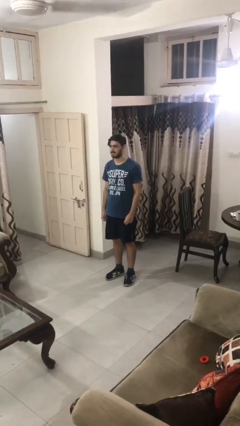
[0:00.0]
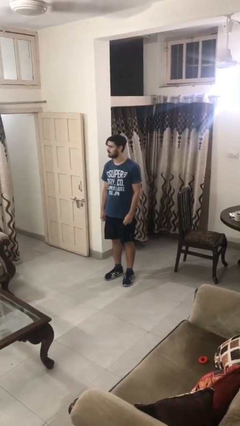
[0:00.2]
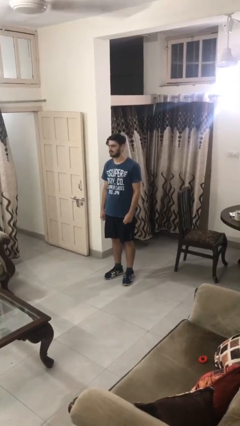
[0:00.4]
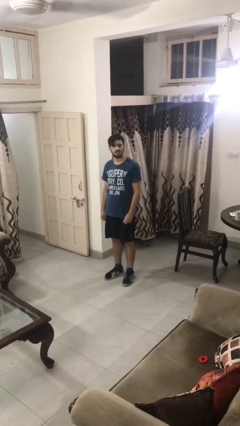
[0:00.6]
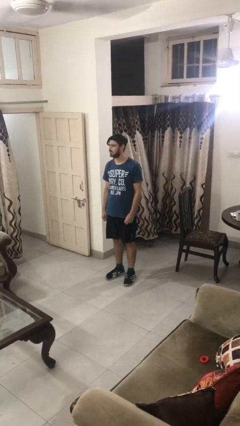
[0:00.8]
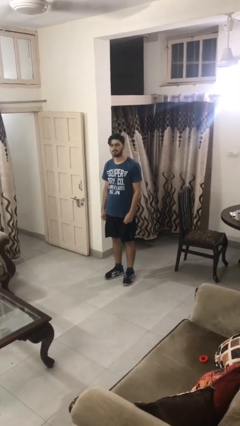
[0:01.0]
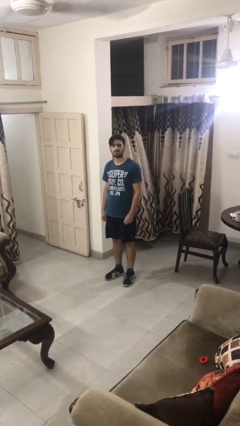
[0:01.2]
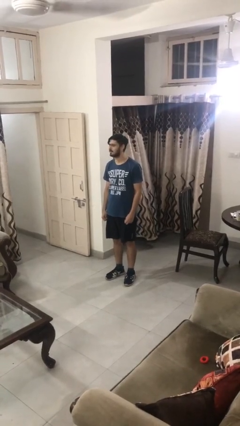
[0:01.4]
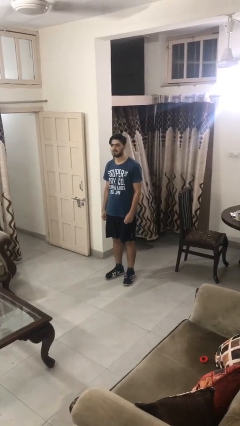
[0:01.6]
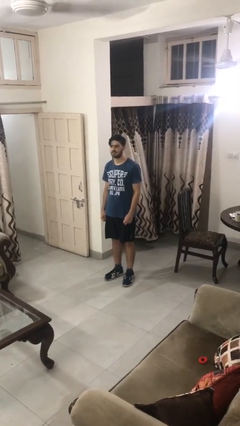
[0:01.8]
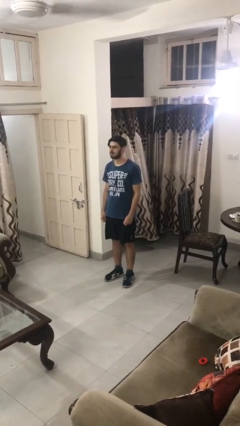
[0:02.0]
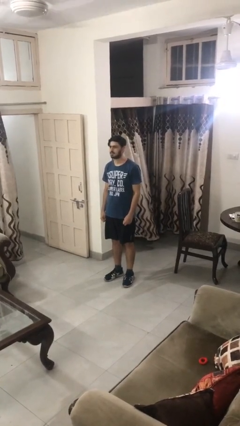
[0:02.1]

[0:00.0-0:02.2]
person shakes head

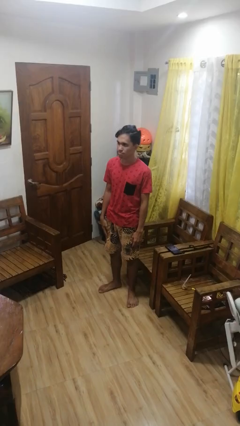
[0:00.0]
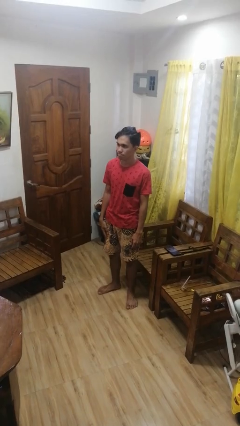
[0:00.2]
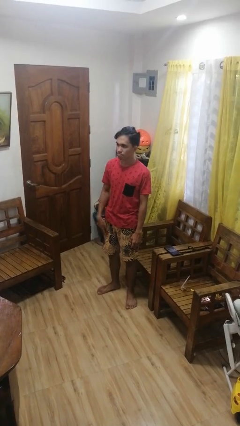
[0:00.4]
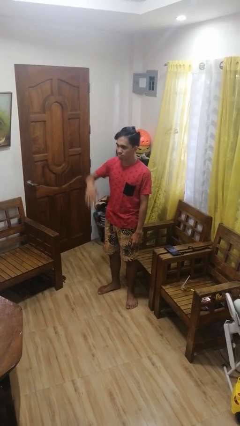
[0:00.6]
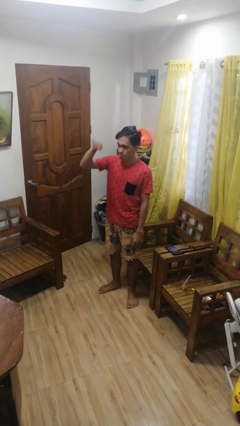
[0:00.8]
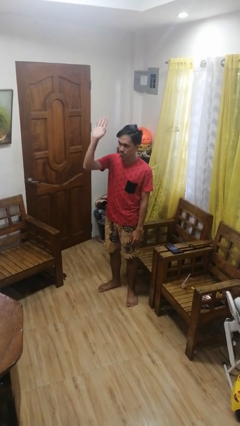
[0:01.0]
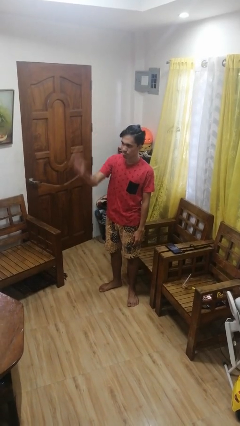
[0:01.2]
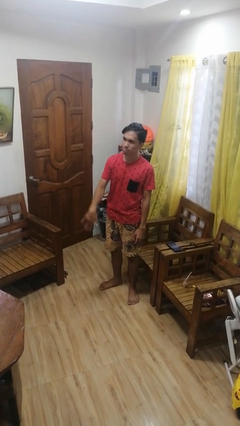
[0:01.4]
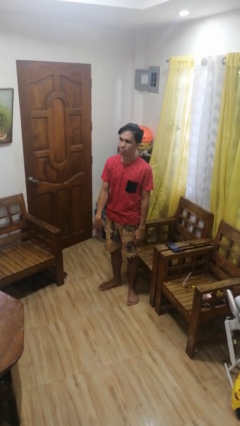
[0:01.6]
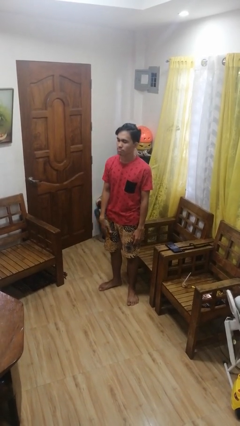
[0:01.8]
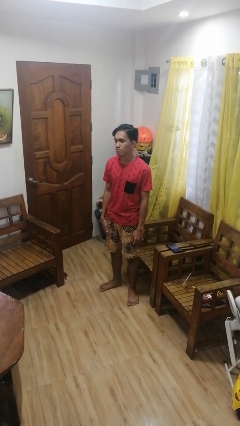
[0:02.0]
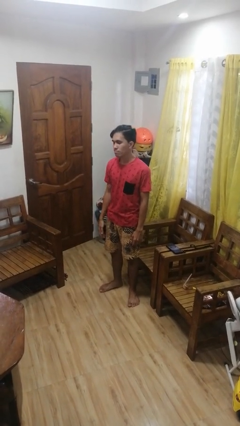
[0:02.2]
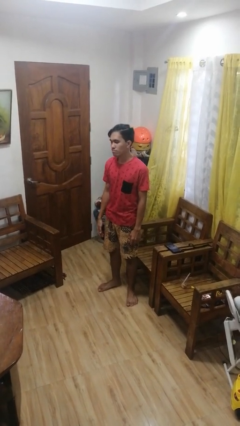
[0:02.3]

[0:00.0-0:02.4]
person gestures swipe down

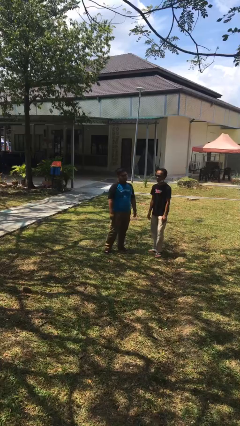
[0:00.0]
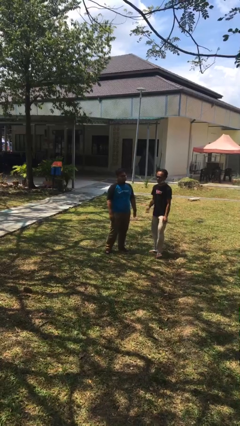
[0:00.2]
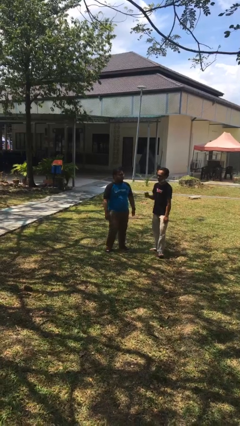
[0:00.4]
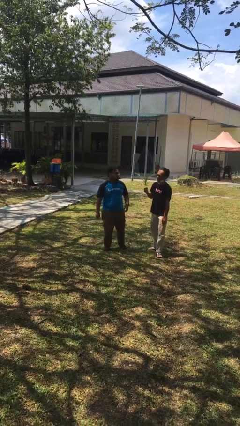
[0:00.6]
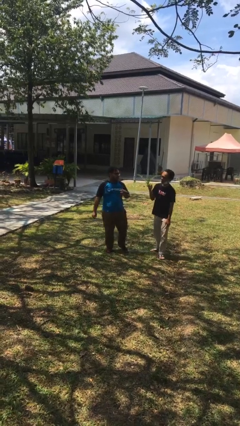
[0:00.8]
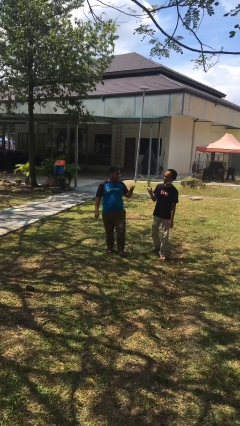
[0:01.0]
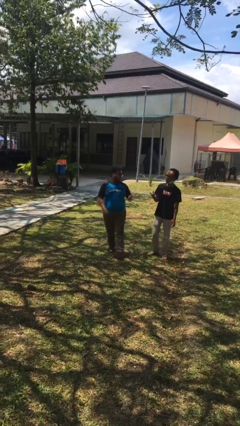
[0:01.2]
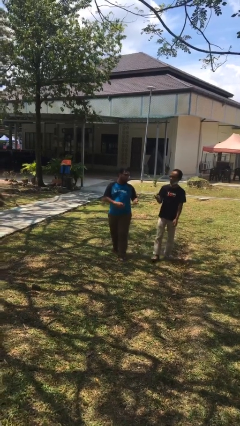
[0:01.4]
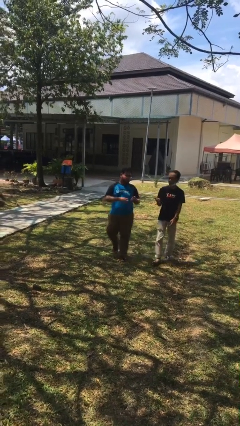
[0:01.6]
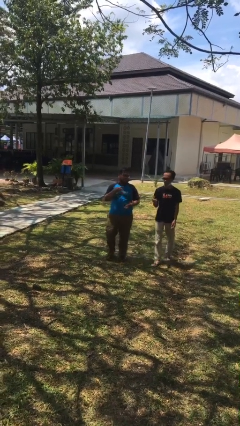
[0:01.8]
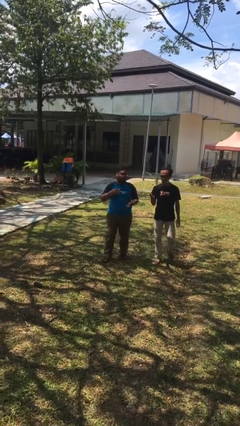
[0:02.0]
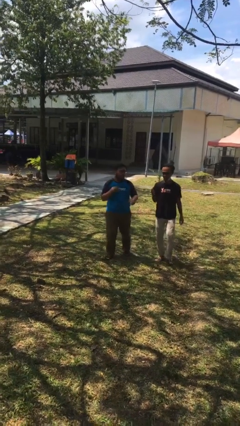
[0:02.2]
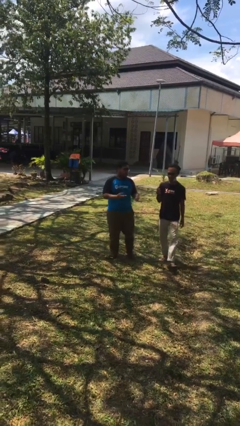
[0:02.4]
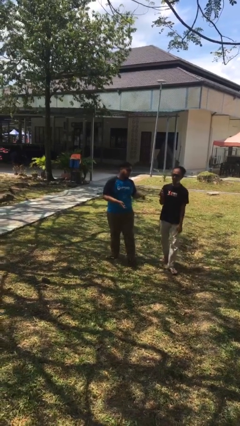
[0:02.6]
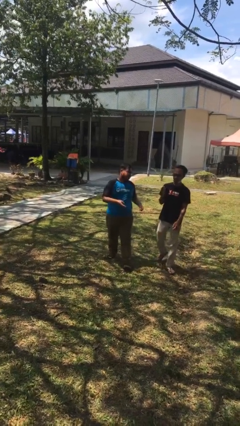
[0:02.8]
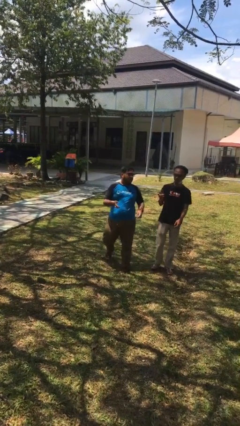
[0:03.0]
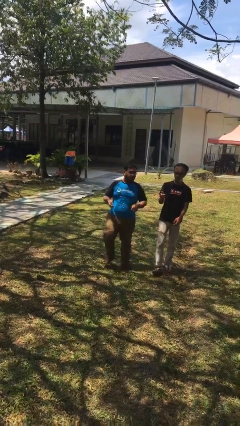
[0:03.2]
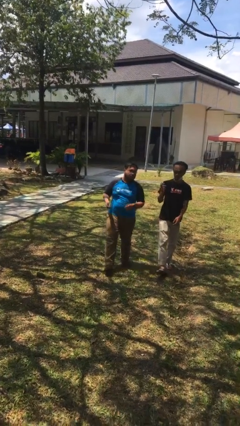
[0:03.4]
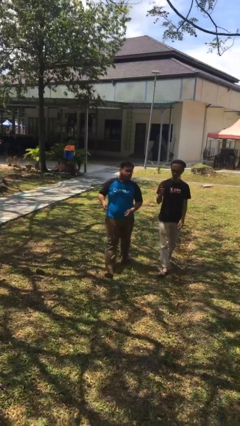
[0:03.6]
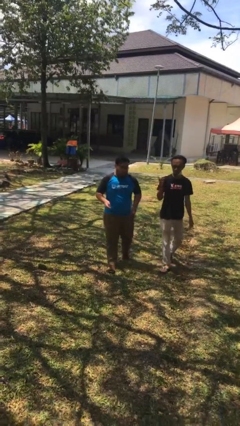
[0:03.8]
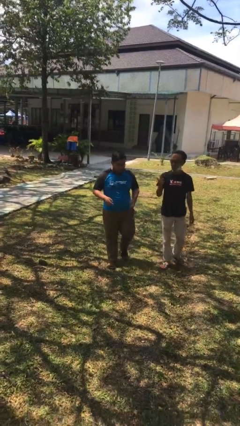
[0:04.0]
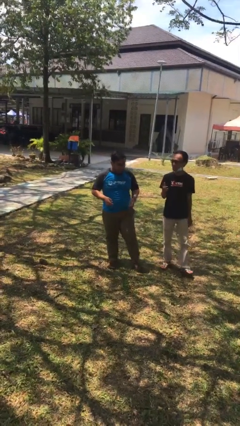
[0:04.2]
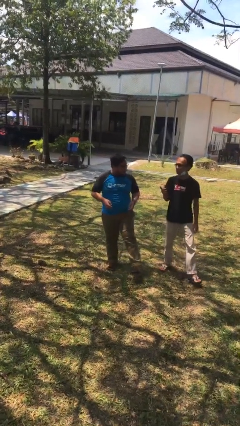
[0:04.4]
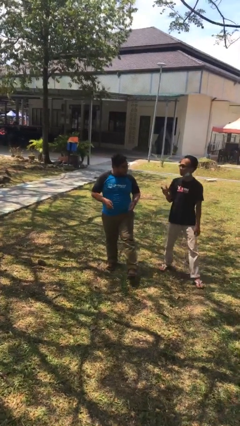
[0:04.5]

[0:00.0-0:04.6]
person talks to person

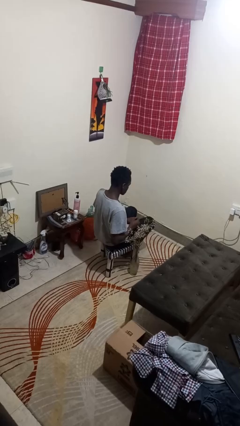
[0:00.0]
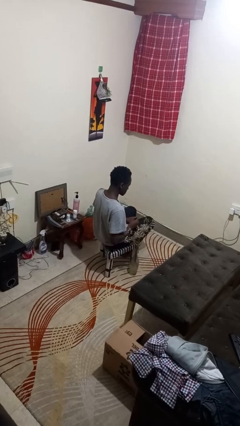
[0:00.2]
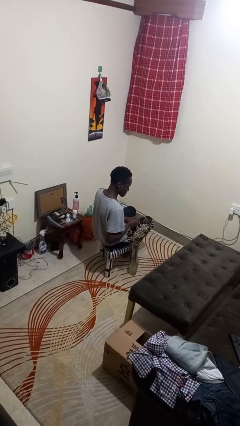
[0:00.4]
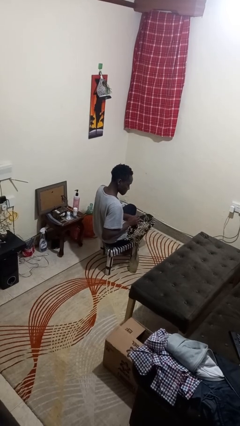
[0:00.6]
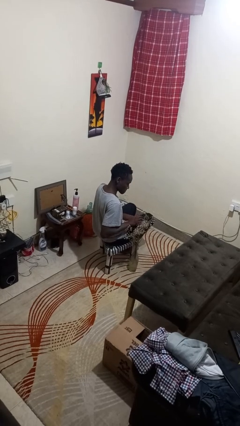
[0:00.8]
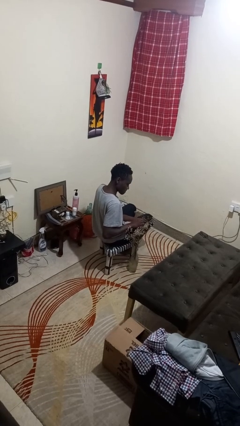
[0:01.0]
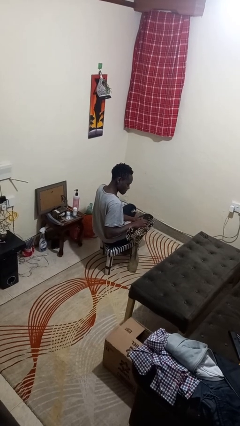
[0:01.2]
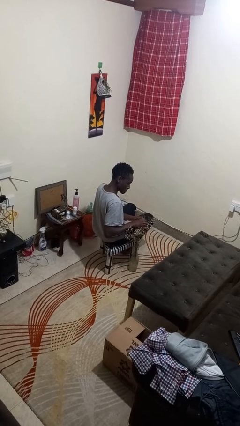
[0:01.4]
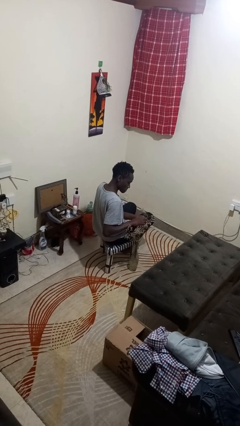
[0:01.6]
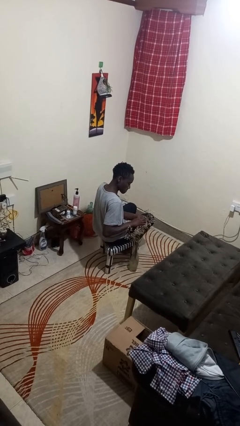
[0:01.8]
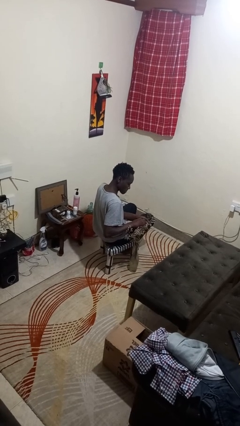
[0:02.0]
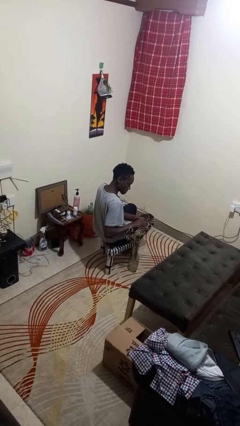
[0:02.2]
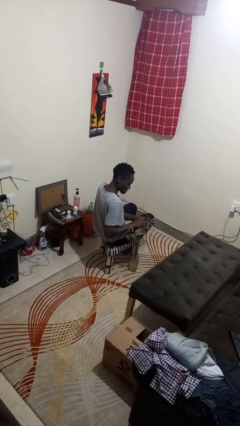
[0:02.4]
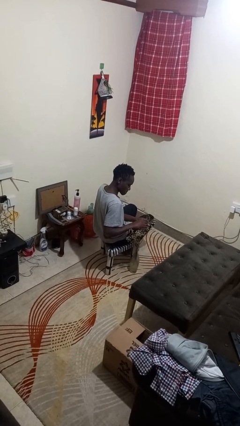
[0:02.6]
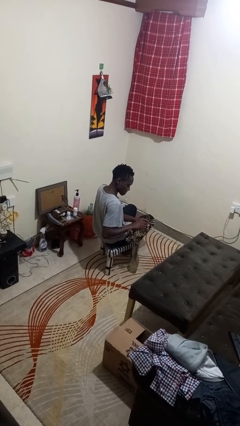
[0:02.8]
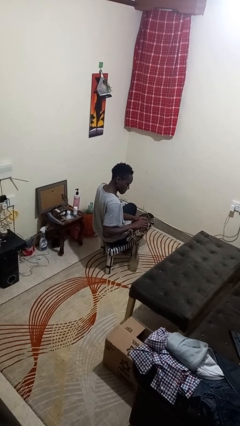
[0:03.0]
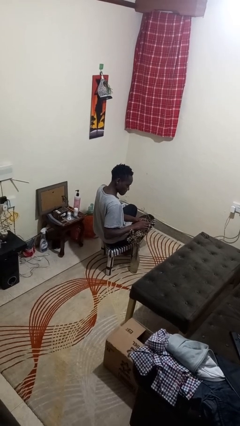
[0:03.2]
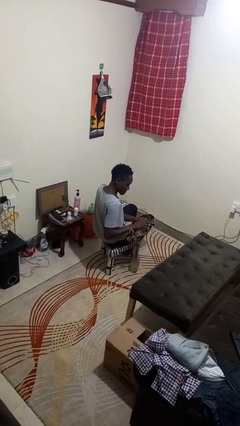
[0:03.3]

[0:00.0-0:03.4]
person arranges flowers in vase

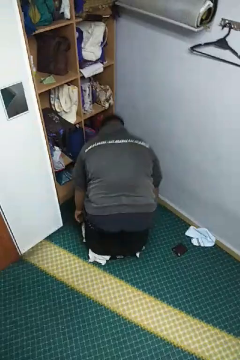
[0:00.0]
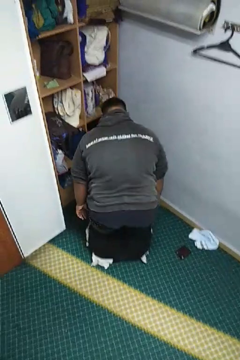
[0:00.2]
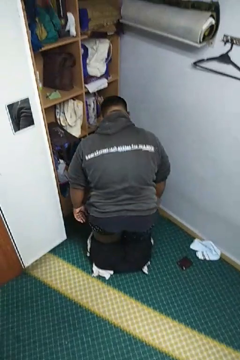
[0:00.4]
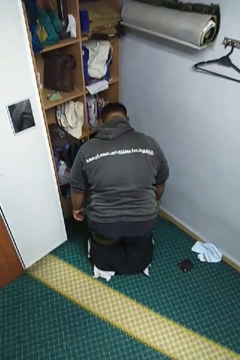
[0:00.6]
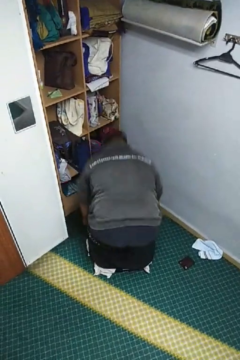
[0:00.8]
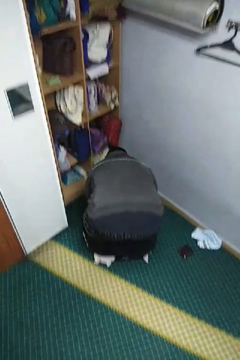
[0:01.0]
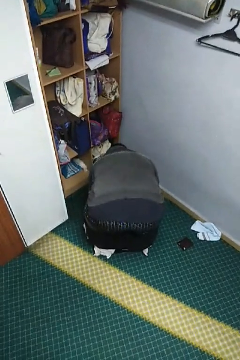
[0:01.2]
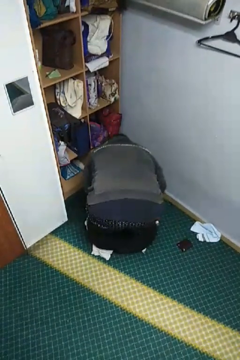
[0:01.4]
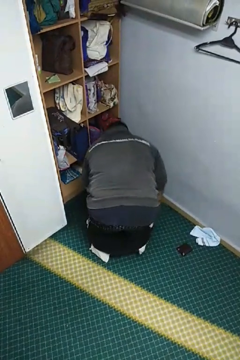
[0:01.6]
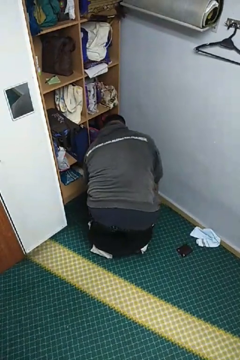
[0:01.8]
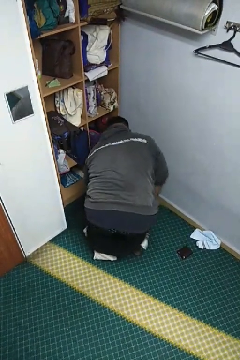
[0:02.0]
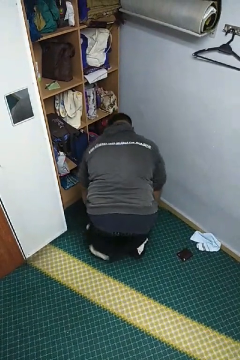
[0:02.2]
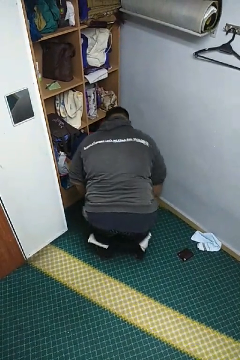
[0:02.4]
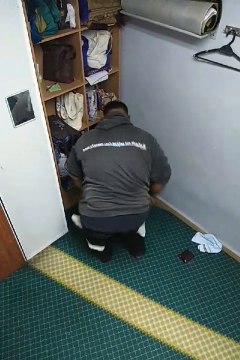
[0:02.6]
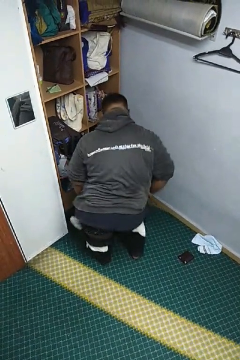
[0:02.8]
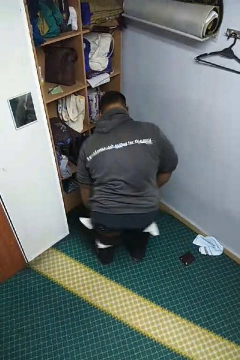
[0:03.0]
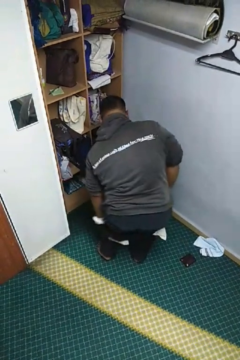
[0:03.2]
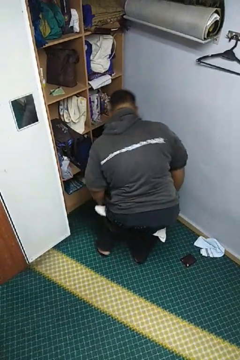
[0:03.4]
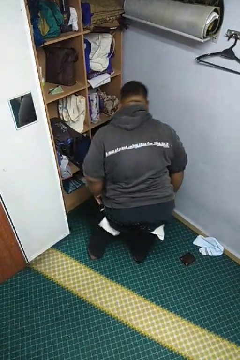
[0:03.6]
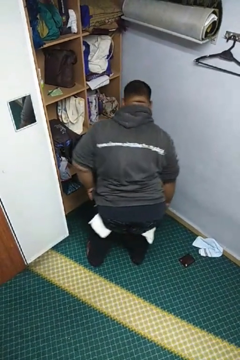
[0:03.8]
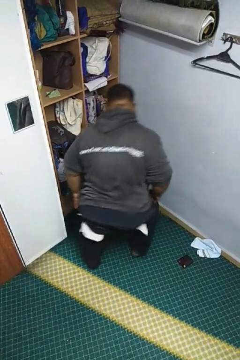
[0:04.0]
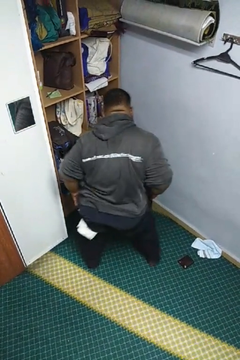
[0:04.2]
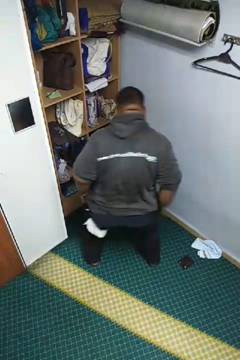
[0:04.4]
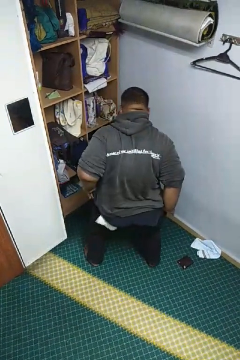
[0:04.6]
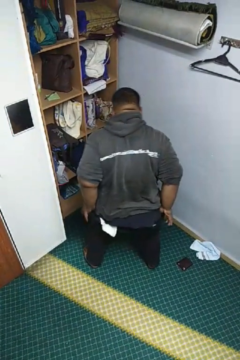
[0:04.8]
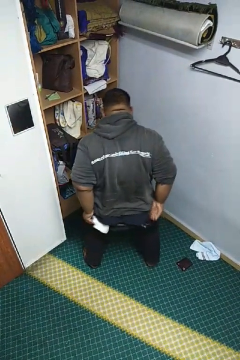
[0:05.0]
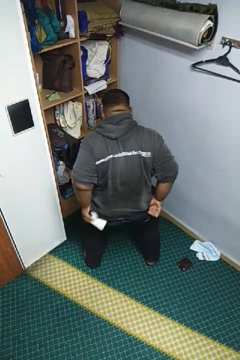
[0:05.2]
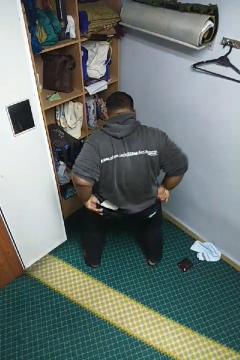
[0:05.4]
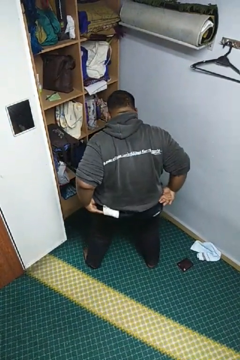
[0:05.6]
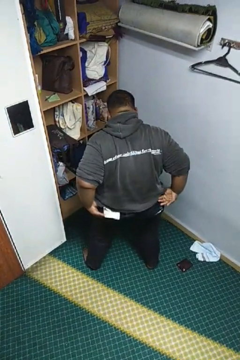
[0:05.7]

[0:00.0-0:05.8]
person puts on pants
